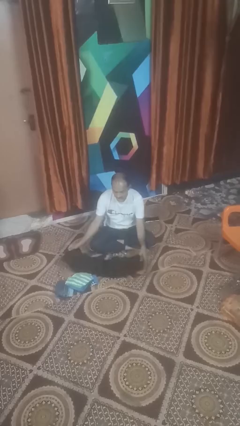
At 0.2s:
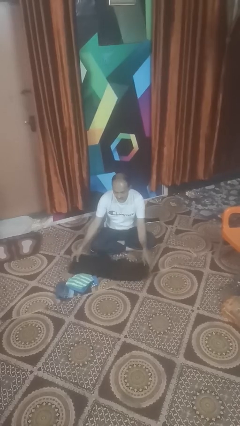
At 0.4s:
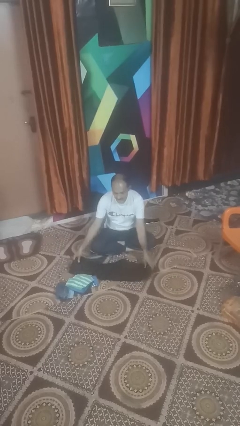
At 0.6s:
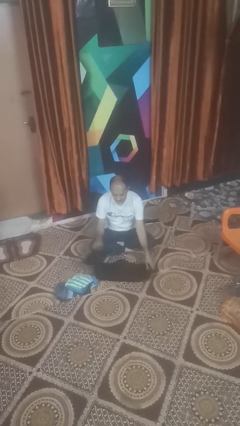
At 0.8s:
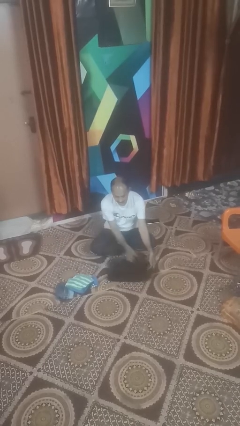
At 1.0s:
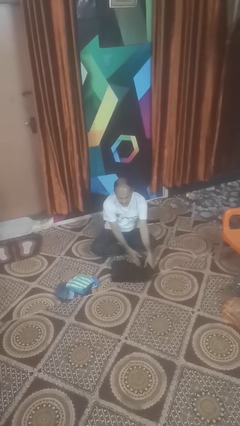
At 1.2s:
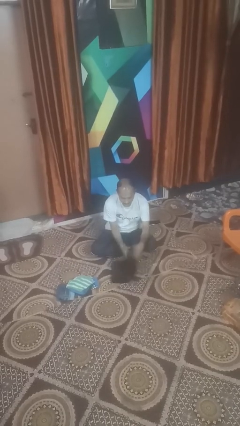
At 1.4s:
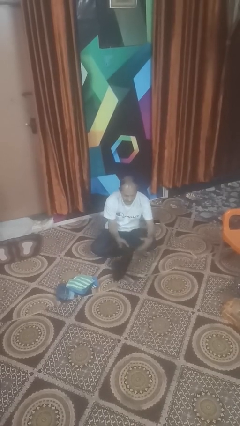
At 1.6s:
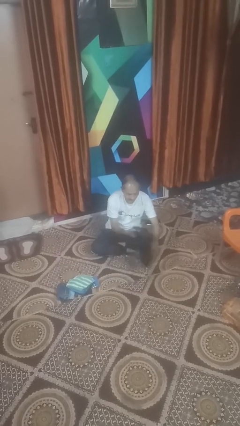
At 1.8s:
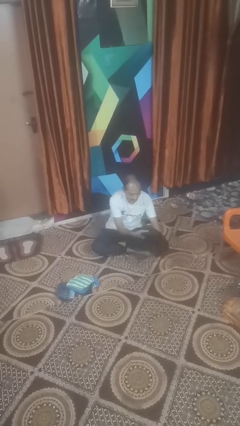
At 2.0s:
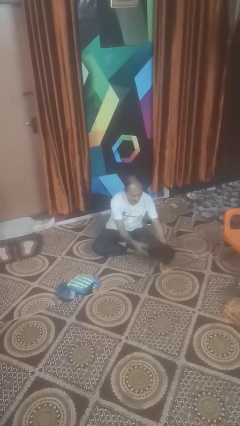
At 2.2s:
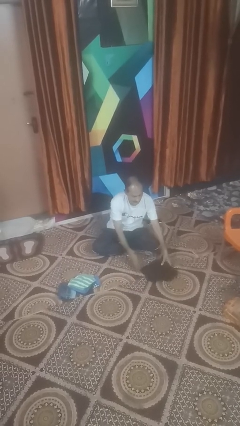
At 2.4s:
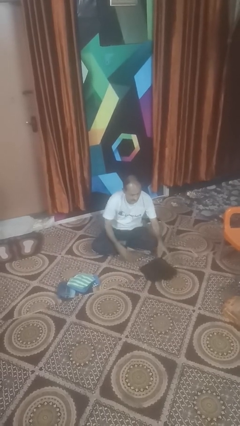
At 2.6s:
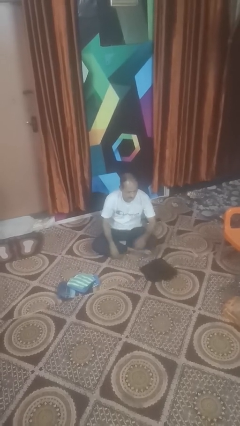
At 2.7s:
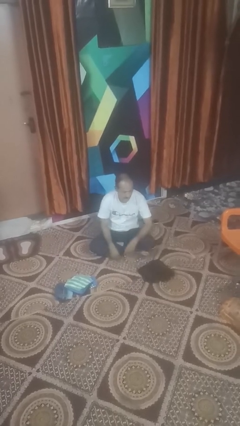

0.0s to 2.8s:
person folds pants

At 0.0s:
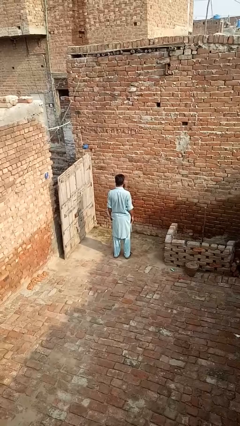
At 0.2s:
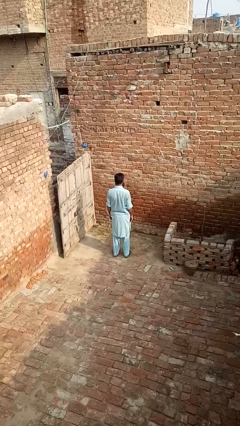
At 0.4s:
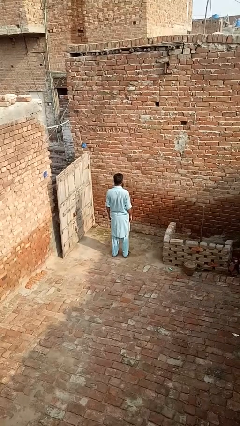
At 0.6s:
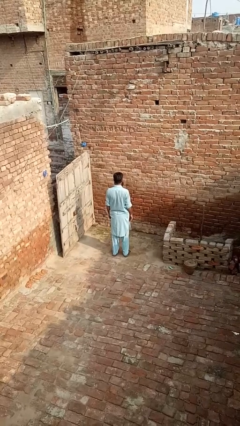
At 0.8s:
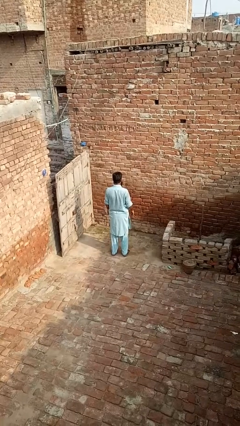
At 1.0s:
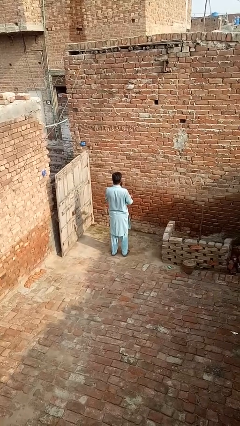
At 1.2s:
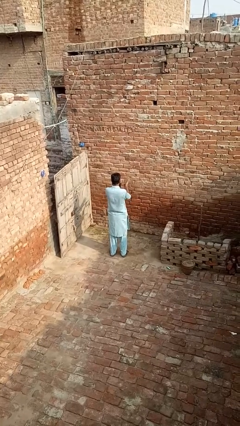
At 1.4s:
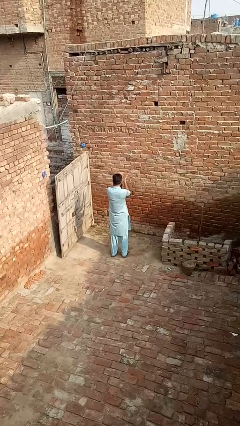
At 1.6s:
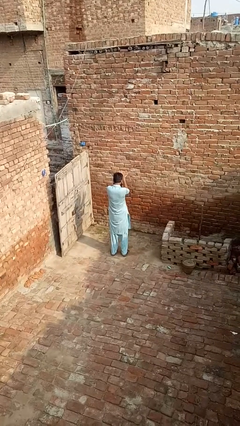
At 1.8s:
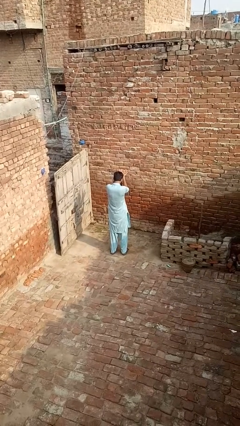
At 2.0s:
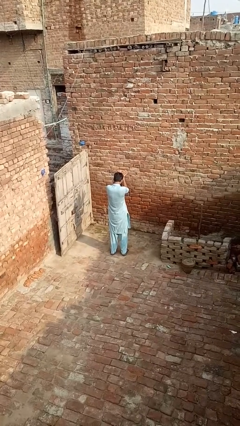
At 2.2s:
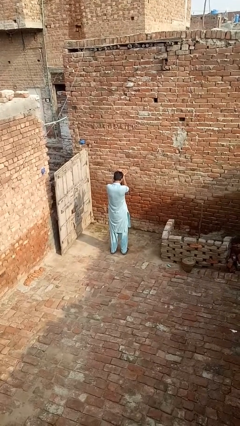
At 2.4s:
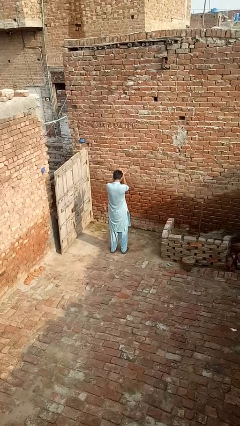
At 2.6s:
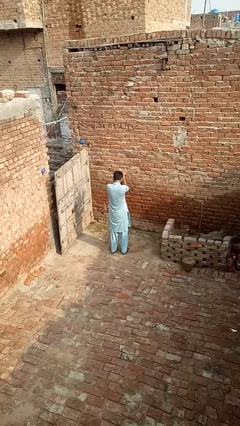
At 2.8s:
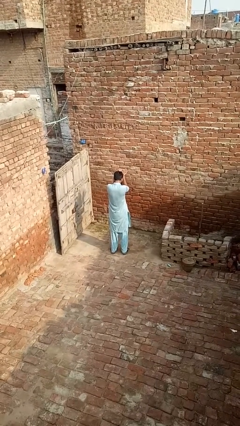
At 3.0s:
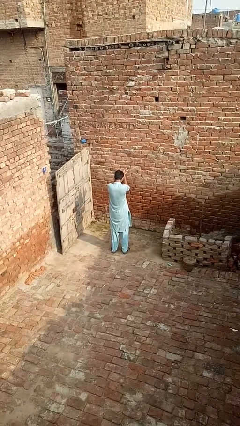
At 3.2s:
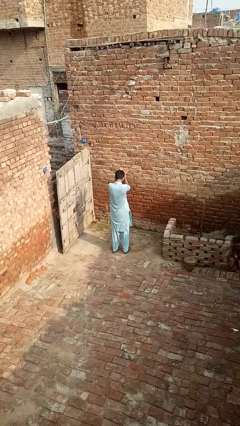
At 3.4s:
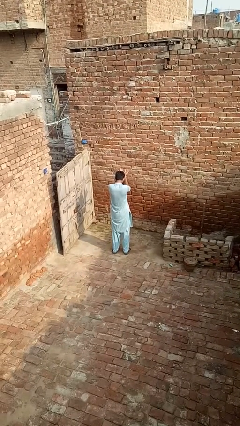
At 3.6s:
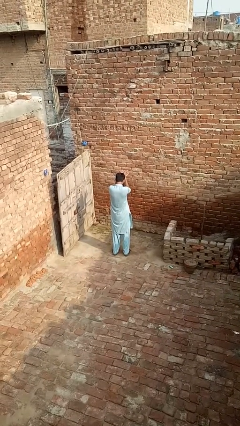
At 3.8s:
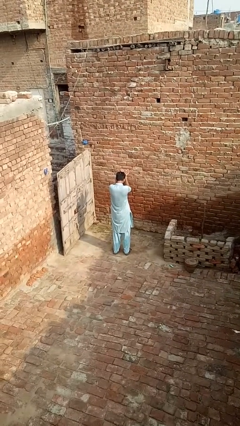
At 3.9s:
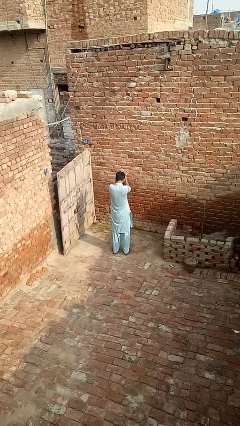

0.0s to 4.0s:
person prays

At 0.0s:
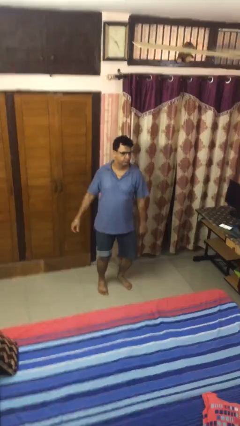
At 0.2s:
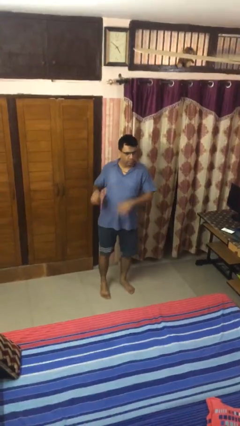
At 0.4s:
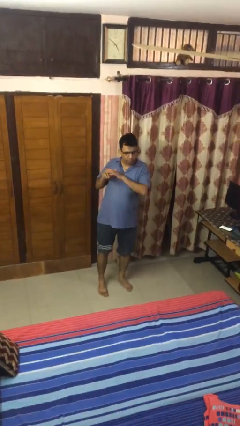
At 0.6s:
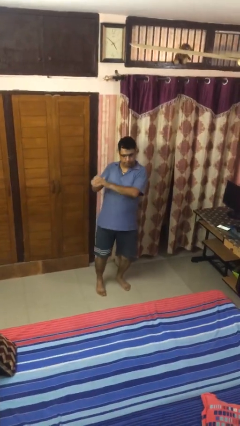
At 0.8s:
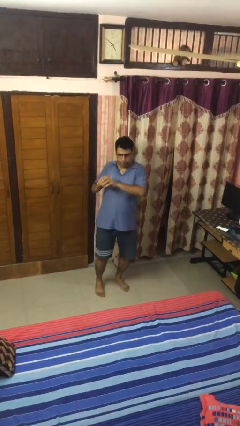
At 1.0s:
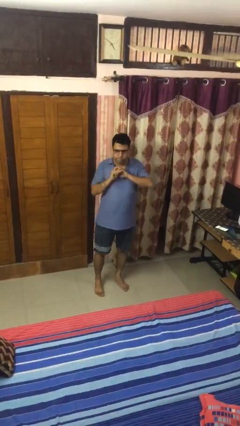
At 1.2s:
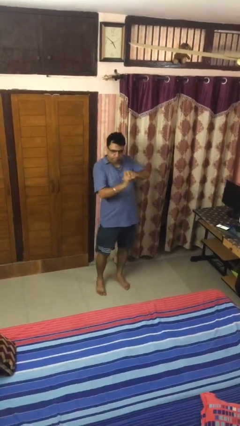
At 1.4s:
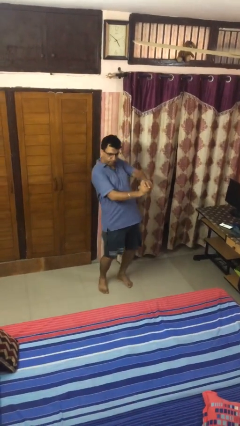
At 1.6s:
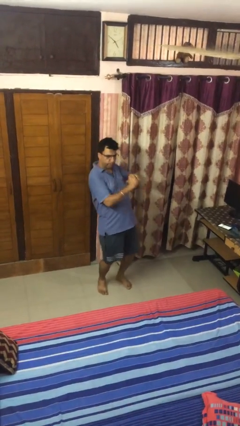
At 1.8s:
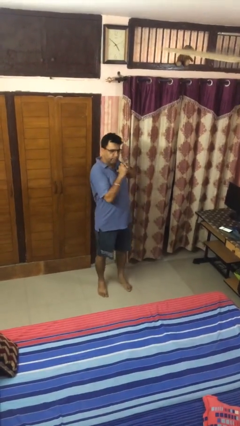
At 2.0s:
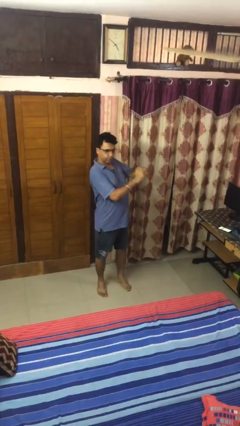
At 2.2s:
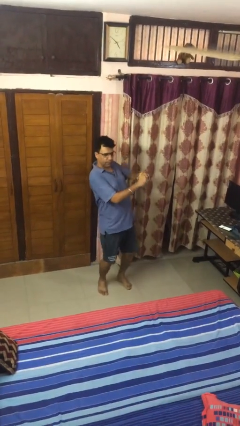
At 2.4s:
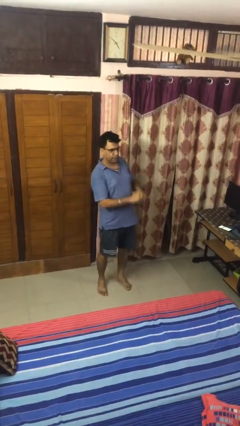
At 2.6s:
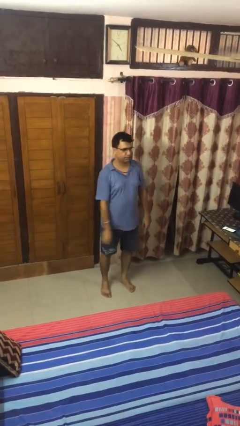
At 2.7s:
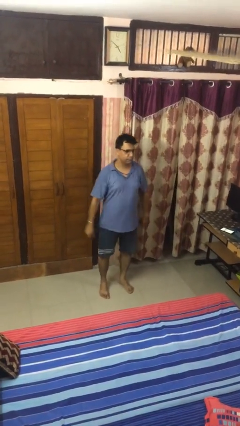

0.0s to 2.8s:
person dances in place

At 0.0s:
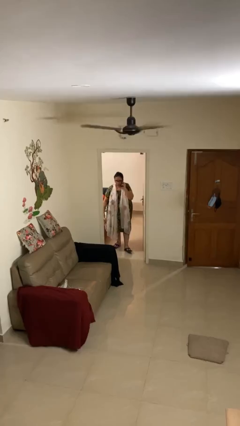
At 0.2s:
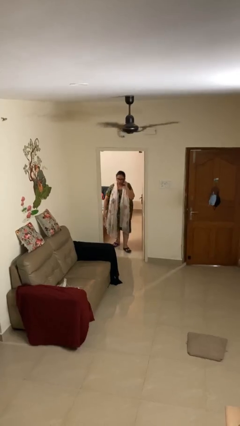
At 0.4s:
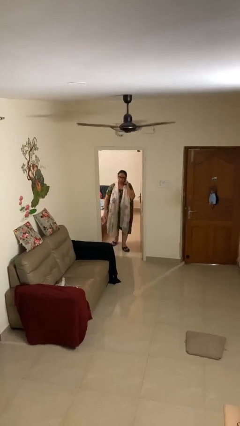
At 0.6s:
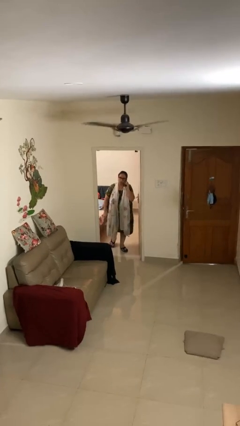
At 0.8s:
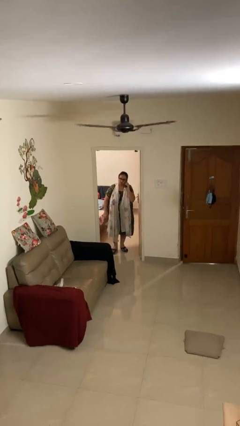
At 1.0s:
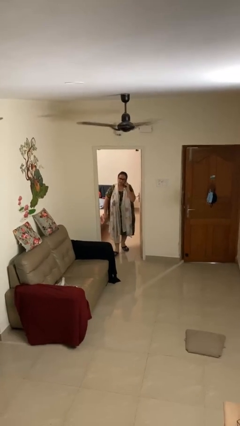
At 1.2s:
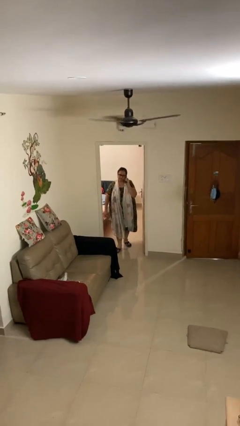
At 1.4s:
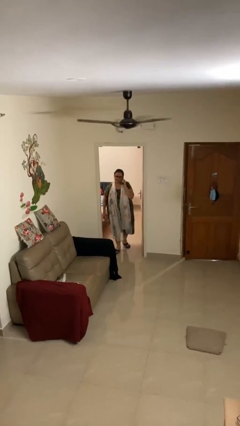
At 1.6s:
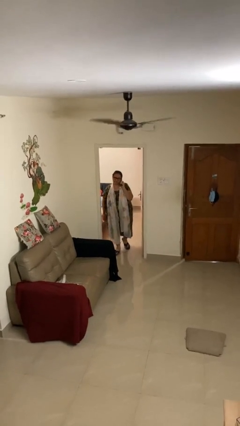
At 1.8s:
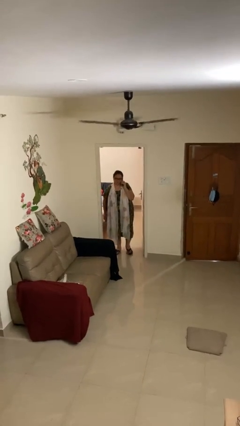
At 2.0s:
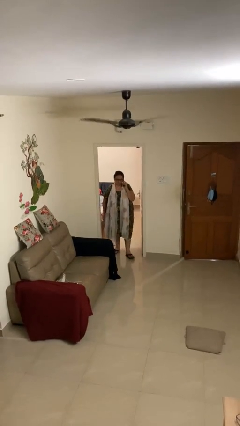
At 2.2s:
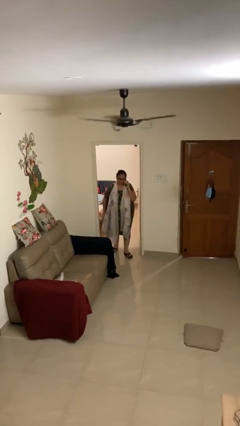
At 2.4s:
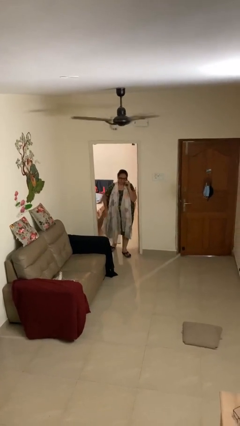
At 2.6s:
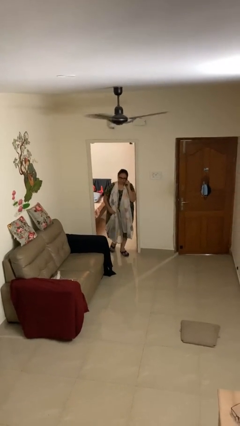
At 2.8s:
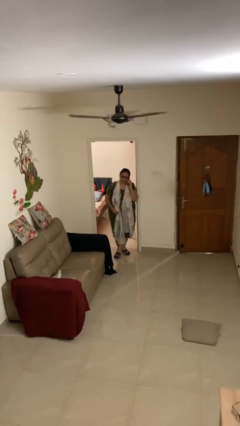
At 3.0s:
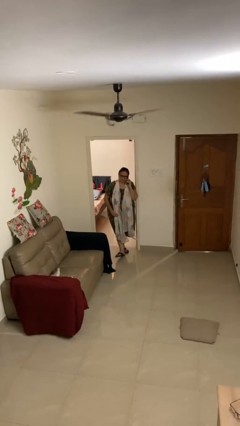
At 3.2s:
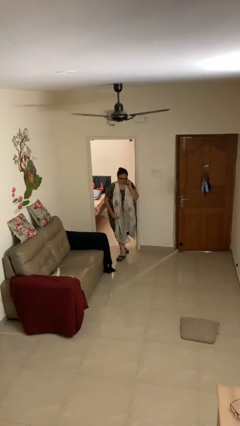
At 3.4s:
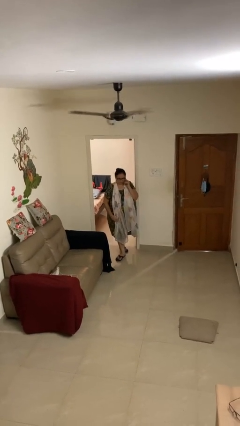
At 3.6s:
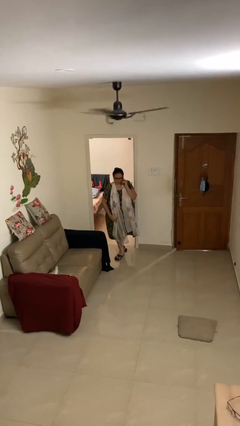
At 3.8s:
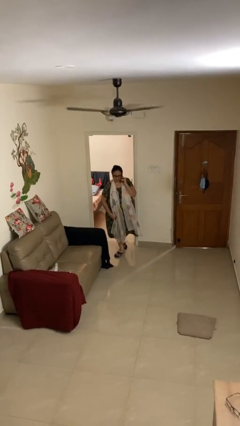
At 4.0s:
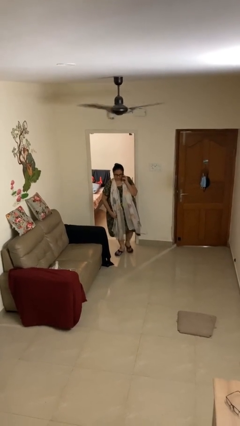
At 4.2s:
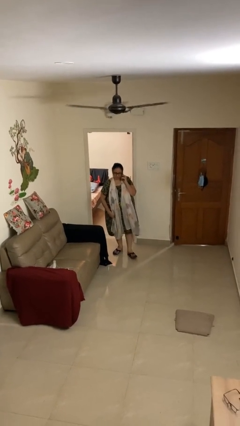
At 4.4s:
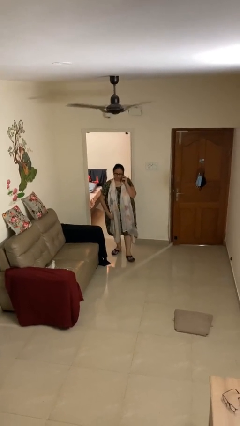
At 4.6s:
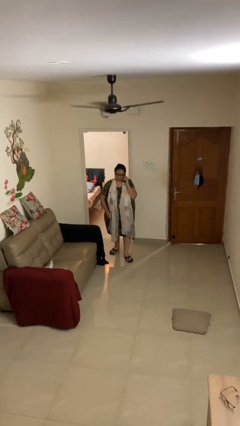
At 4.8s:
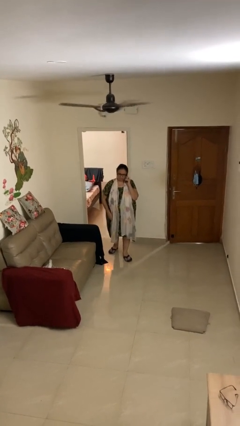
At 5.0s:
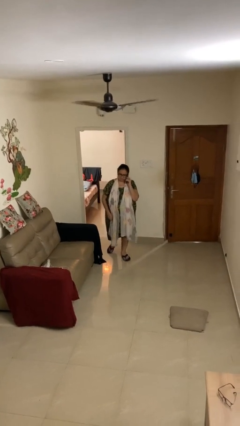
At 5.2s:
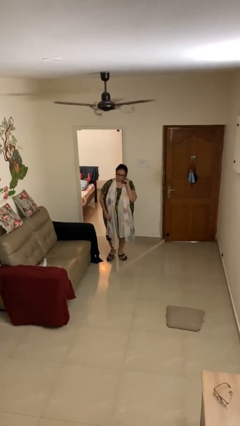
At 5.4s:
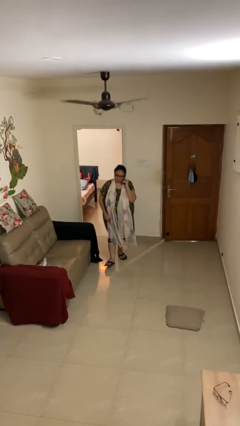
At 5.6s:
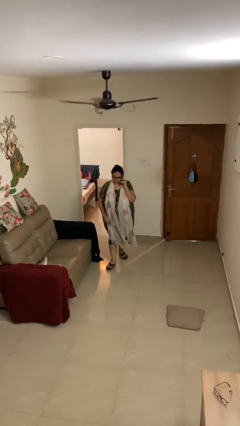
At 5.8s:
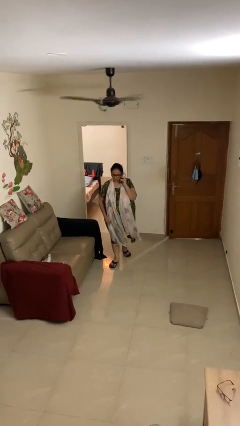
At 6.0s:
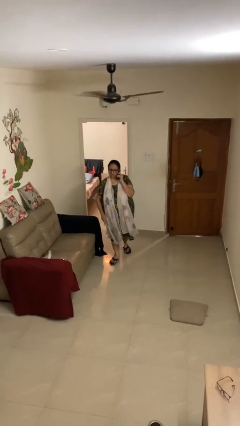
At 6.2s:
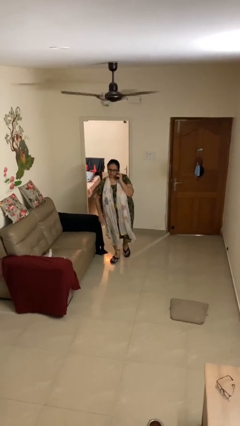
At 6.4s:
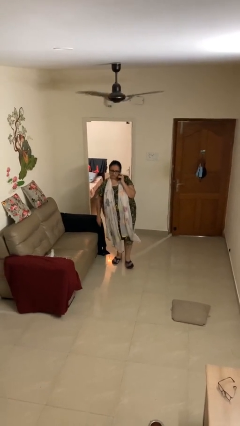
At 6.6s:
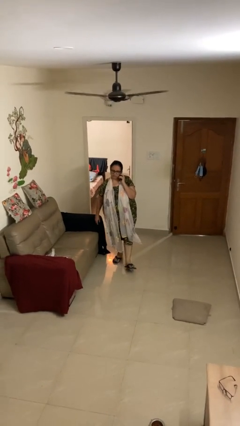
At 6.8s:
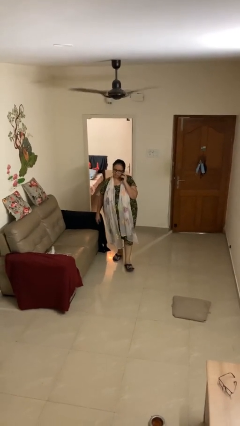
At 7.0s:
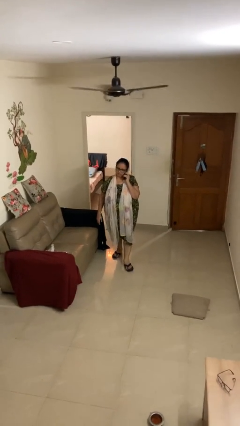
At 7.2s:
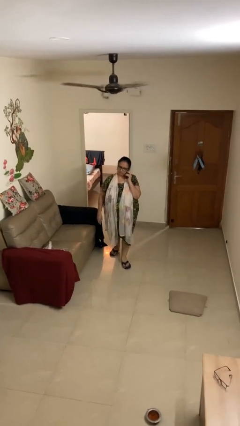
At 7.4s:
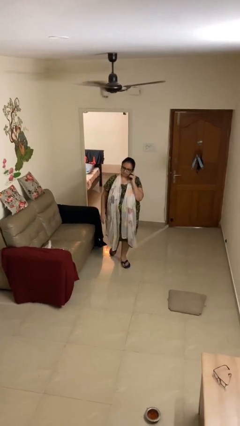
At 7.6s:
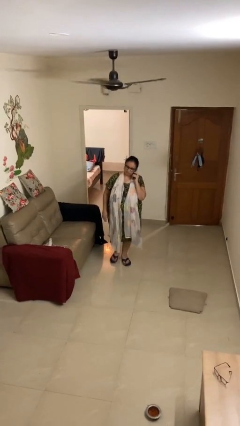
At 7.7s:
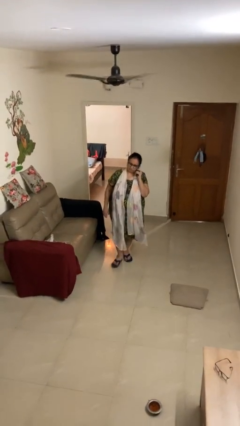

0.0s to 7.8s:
person enters scene through structure

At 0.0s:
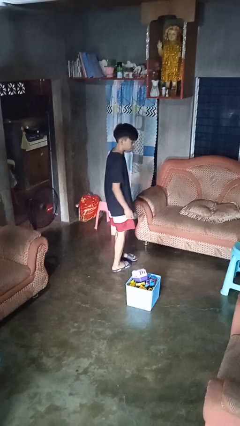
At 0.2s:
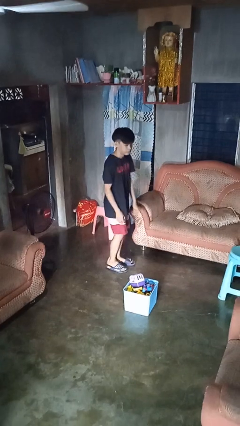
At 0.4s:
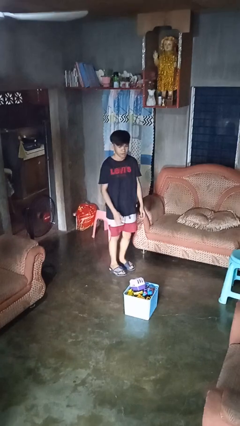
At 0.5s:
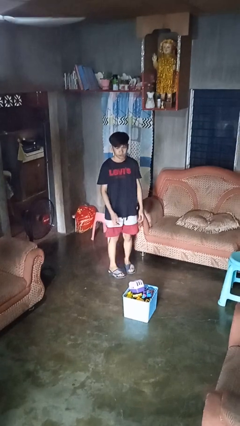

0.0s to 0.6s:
person stands up from floor
